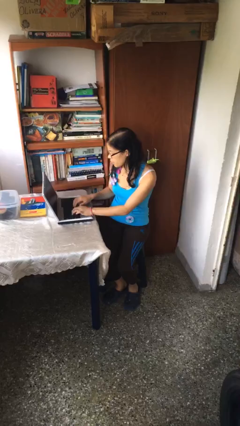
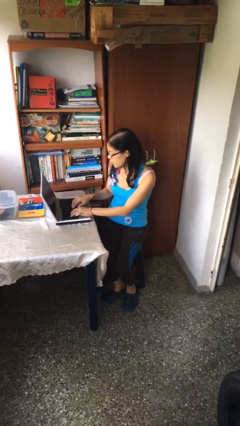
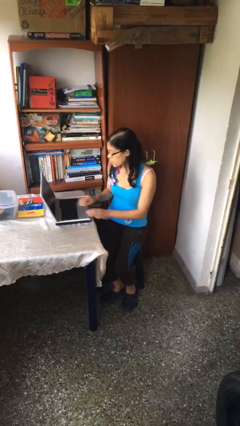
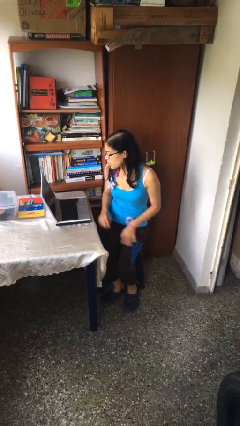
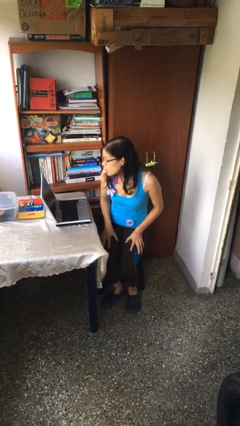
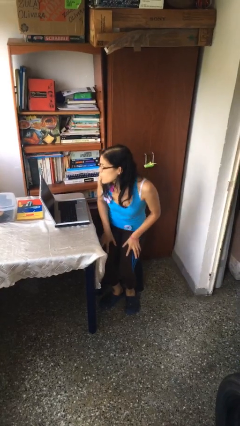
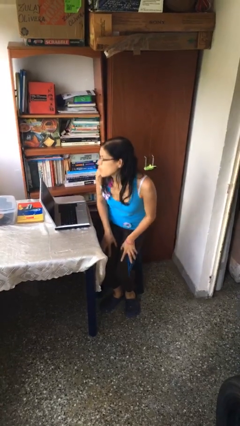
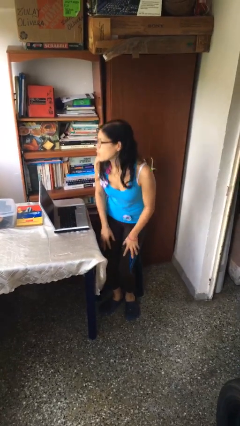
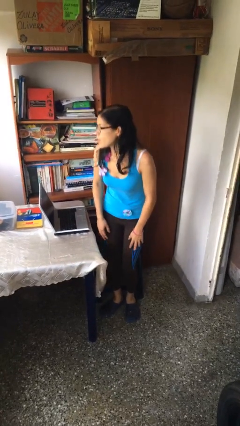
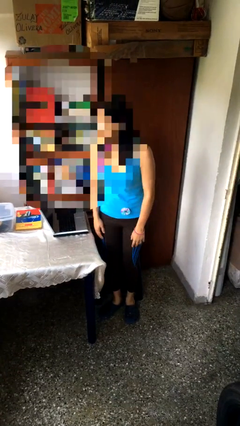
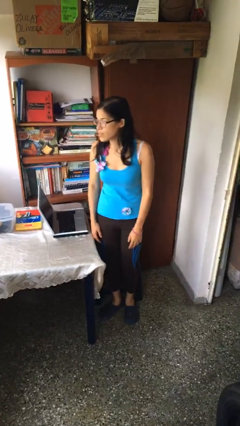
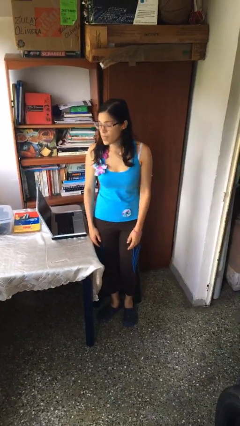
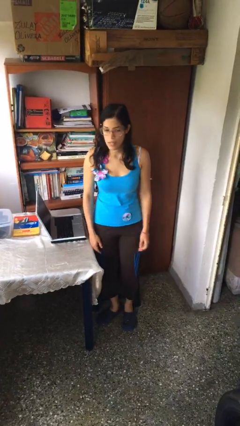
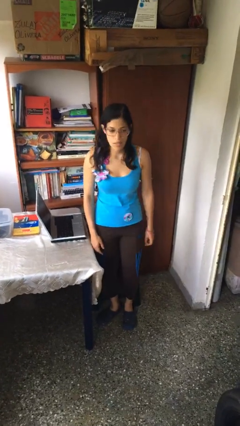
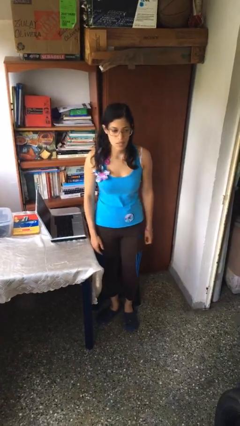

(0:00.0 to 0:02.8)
person stands up

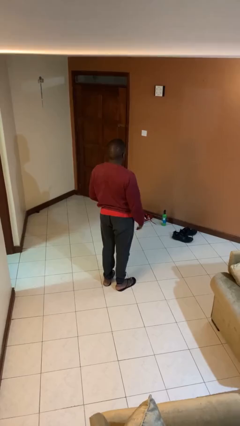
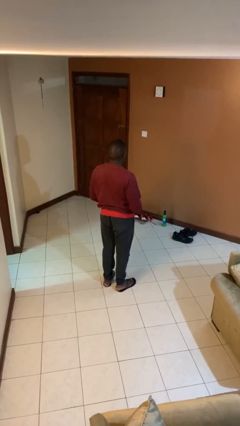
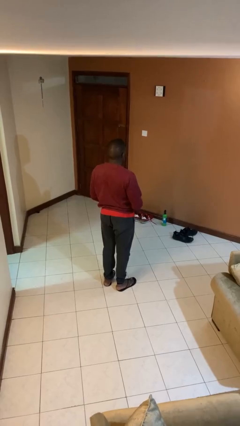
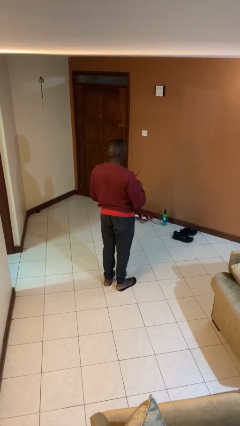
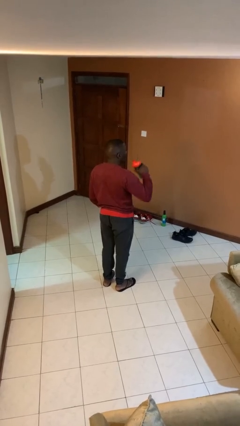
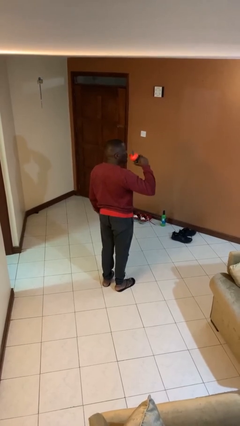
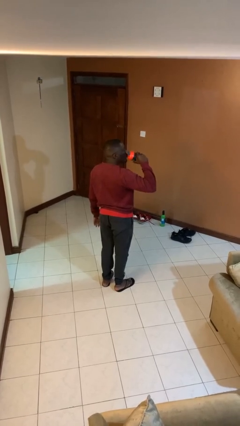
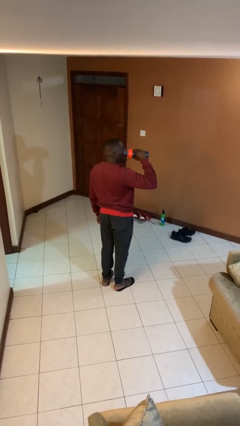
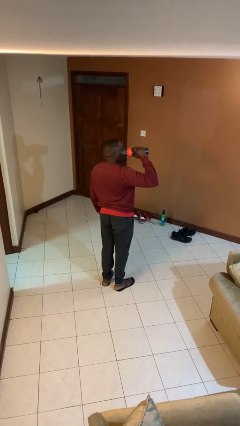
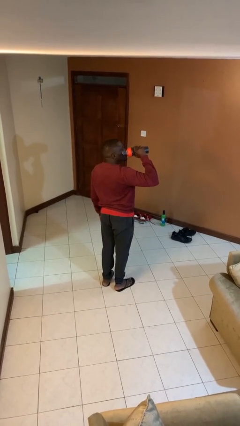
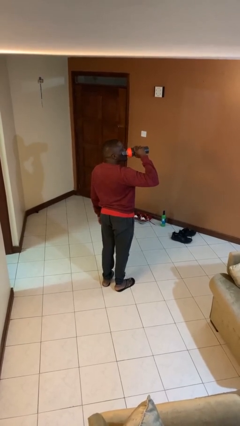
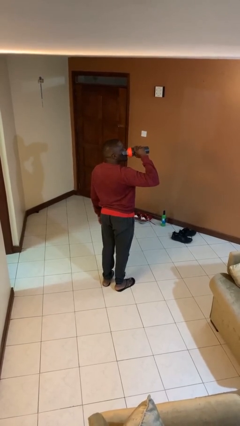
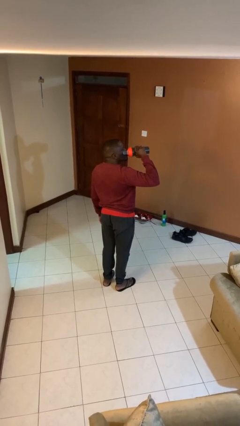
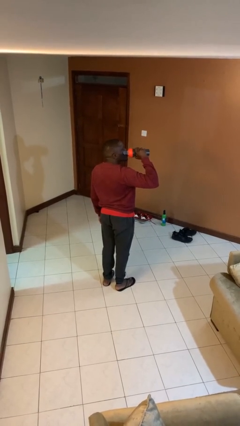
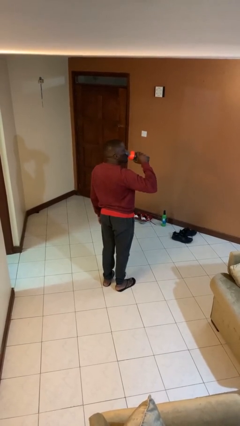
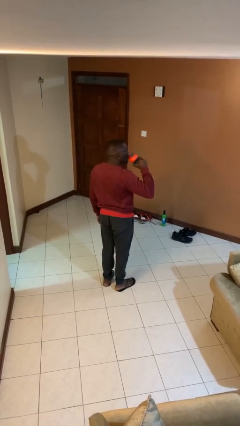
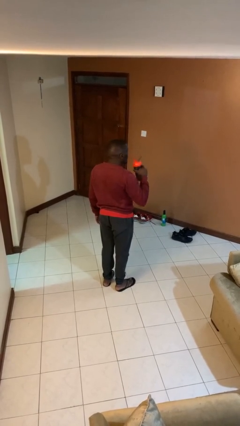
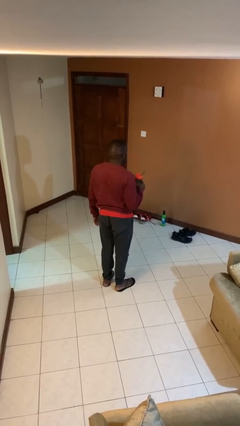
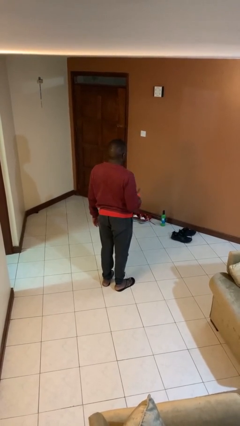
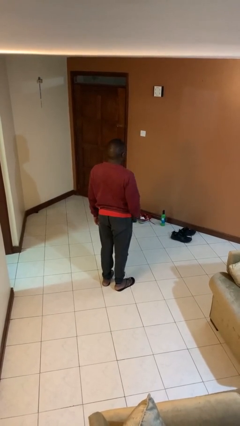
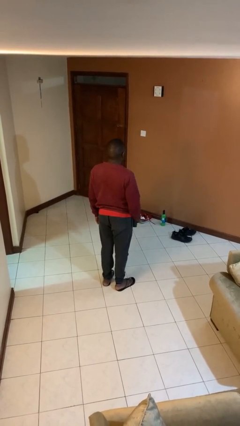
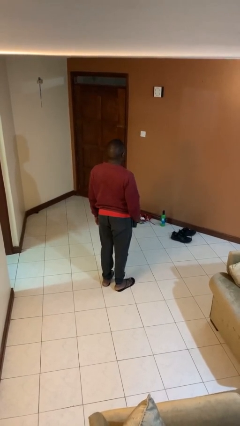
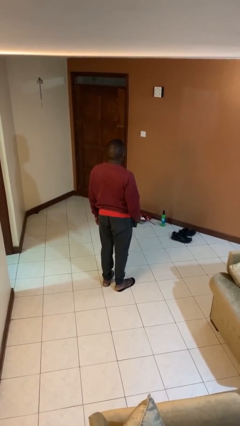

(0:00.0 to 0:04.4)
person drinks from bottle

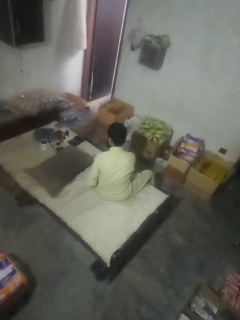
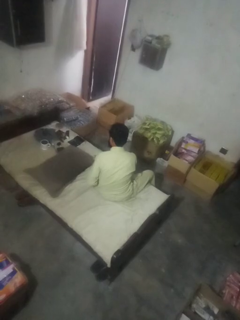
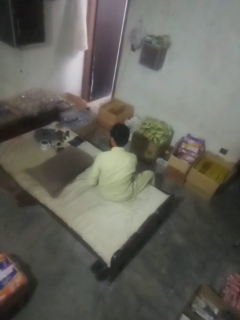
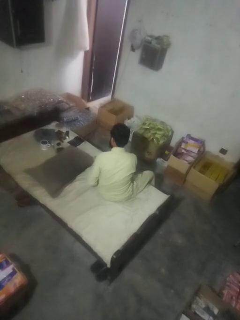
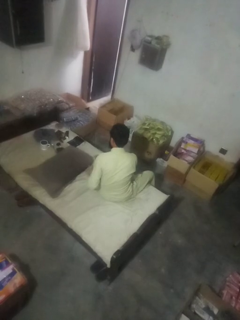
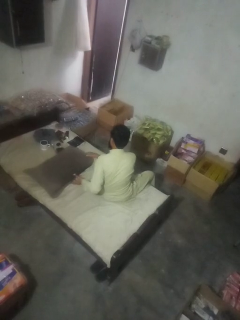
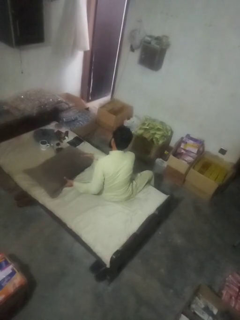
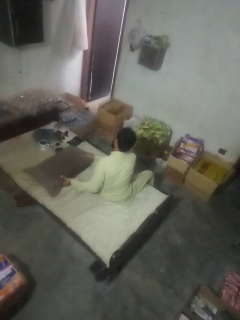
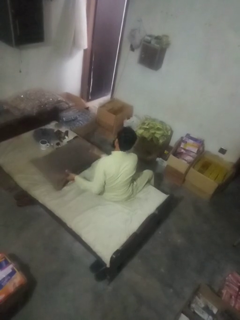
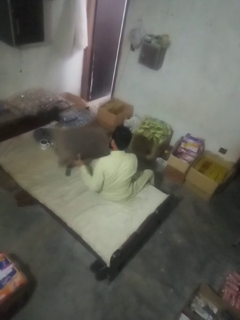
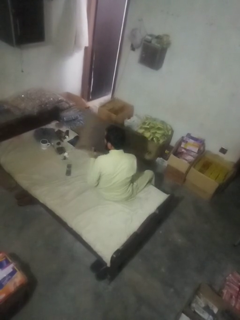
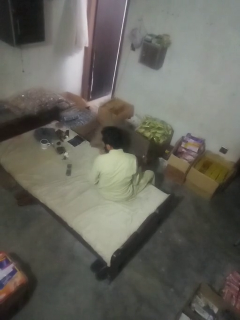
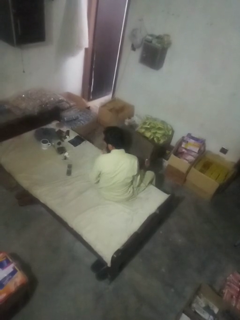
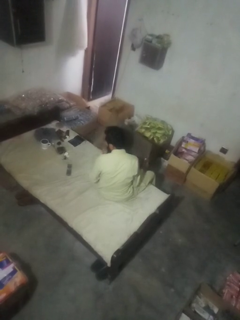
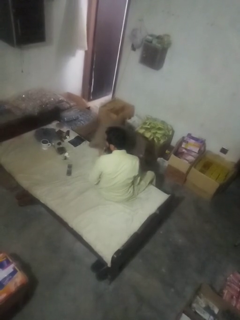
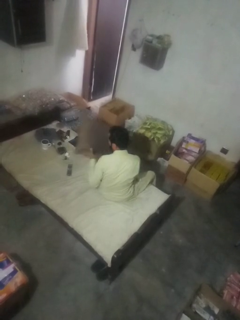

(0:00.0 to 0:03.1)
person searches in couch

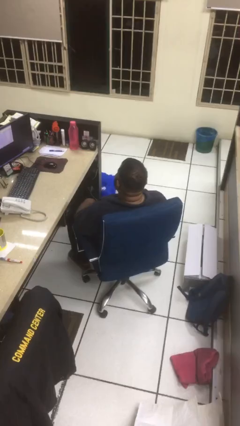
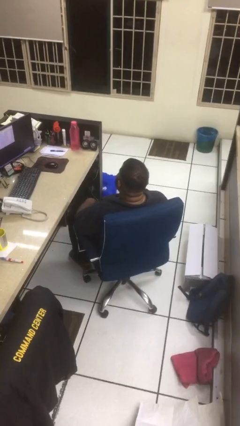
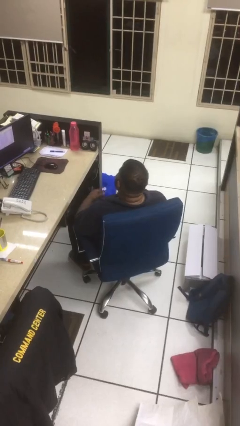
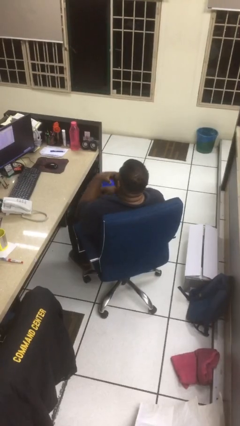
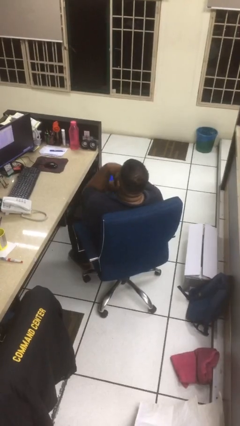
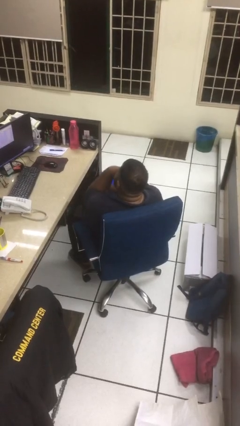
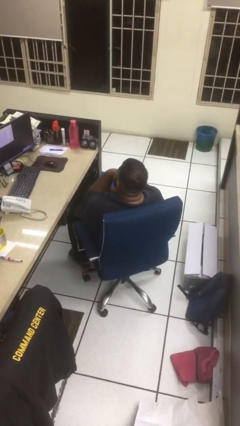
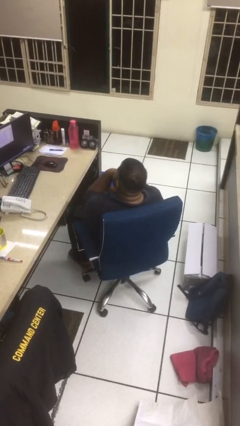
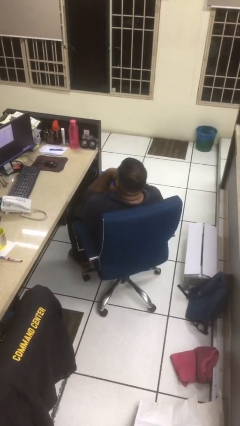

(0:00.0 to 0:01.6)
person strokes chin

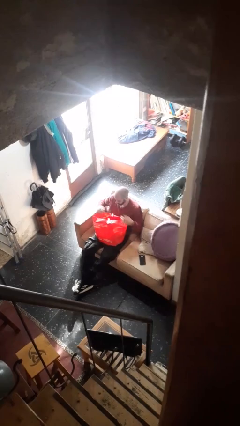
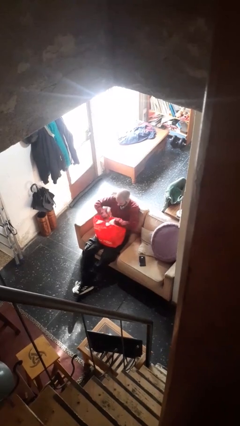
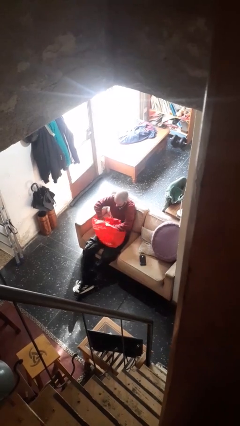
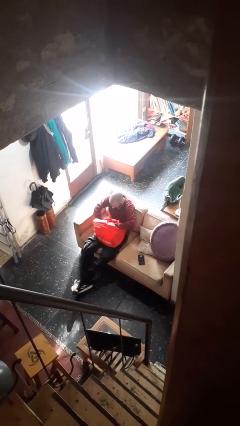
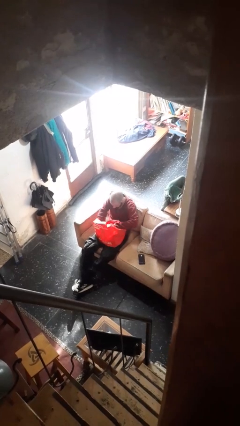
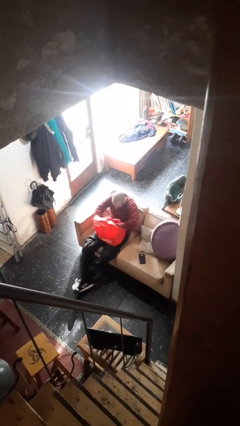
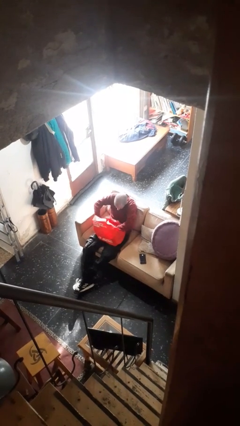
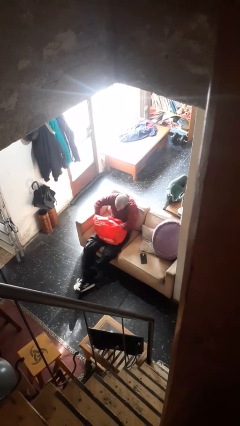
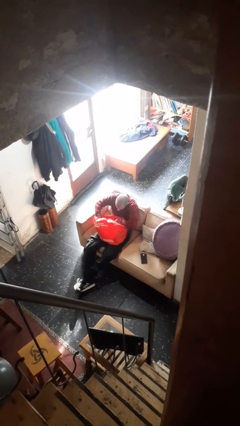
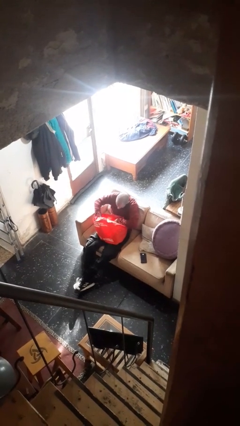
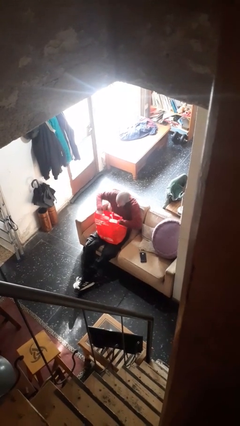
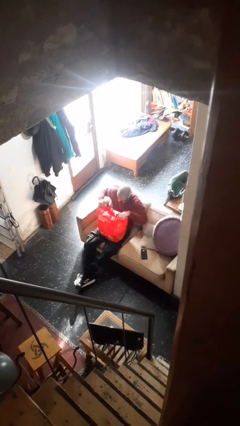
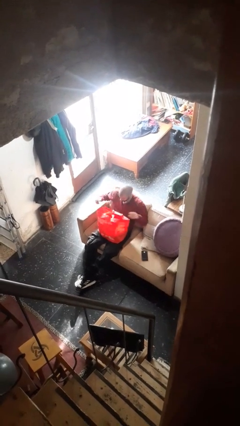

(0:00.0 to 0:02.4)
person searches in bag

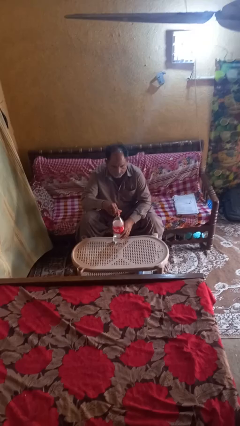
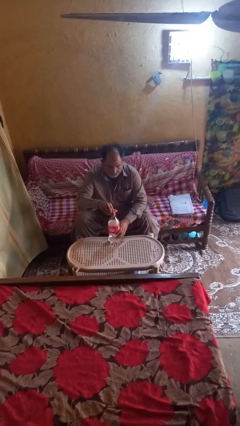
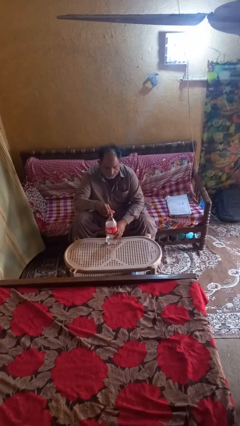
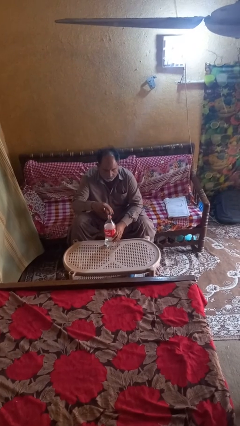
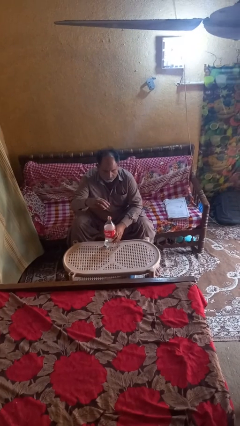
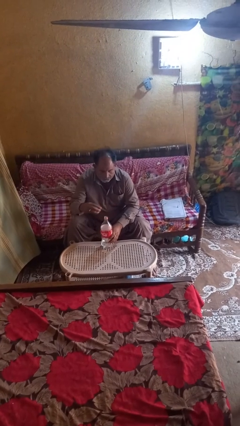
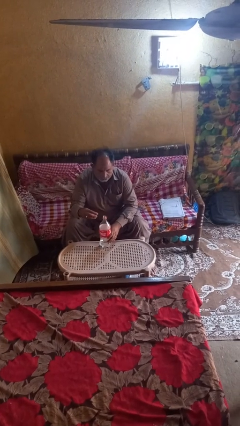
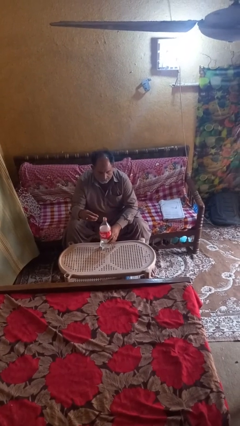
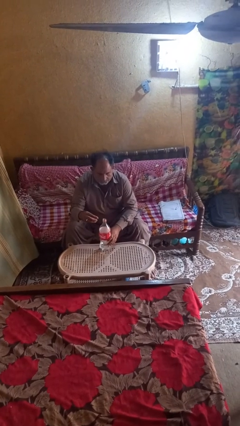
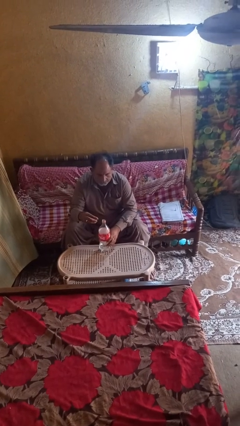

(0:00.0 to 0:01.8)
person unscrews lid from bottle

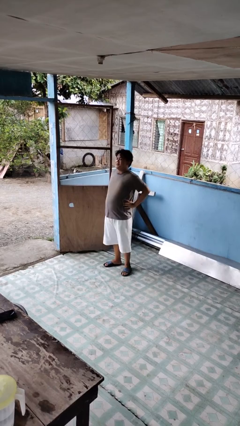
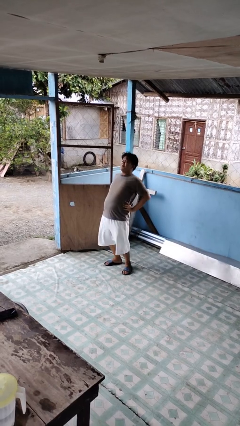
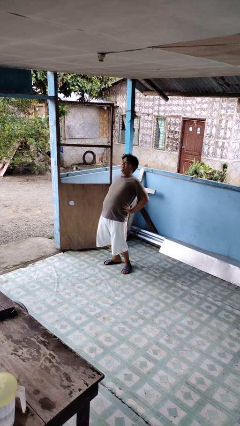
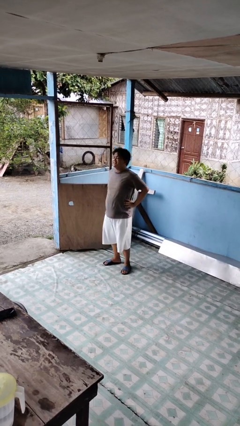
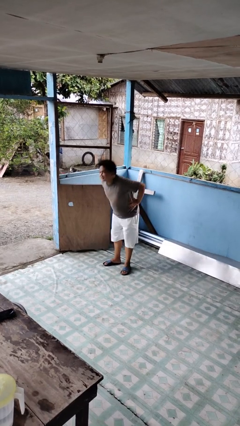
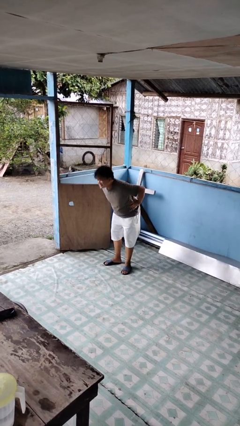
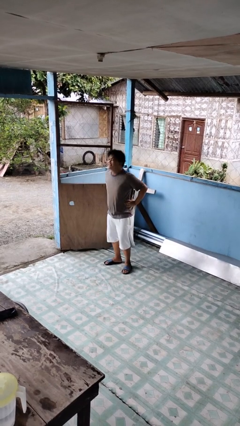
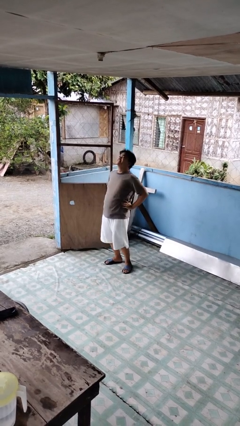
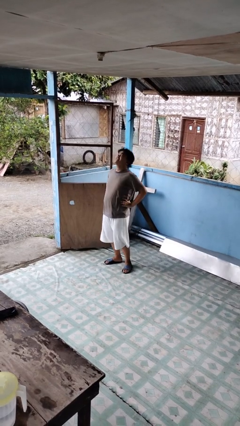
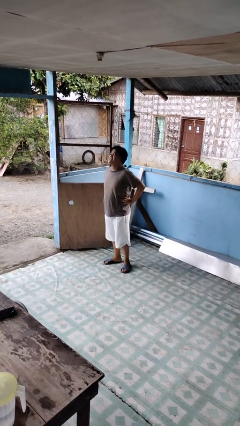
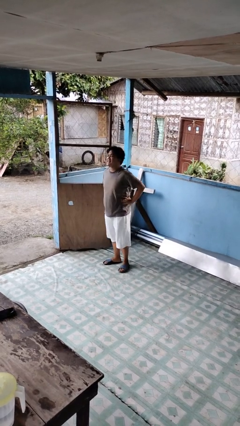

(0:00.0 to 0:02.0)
person wiggles hips
